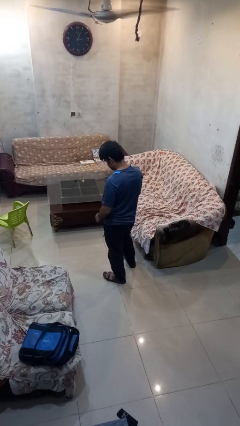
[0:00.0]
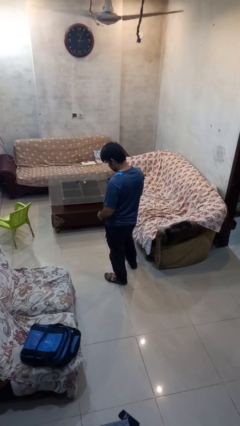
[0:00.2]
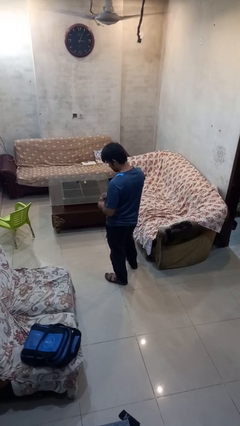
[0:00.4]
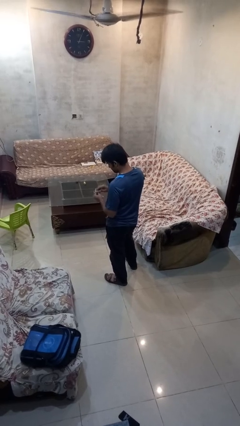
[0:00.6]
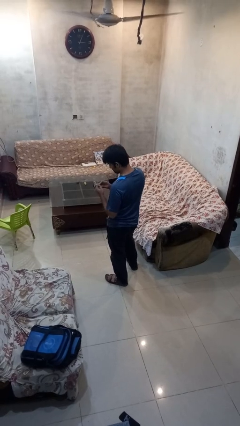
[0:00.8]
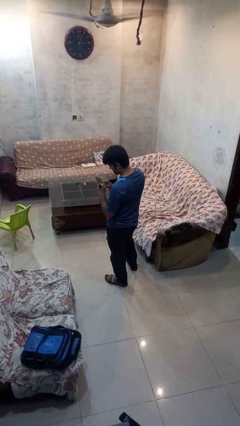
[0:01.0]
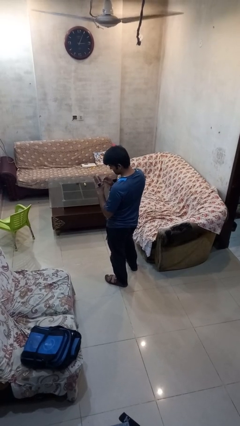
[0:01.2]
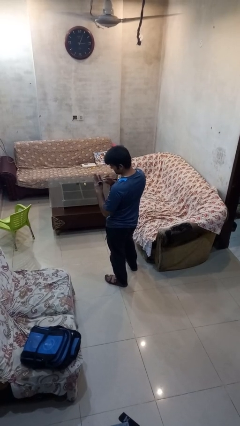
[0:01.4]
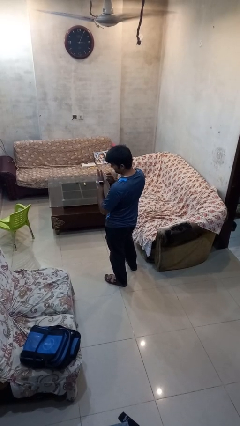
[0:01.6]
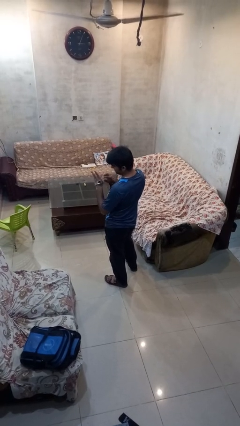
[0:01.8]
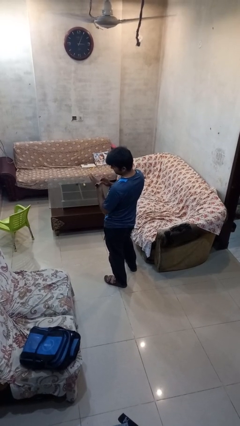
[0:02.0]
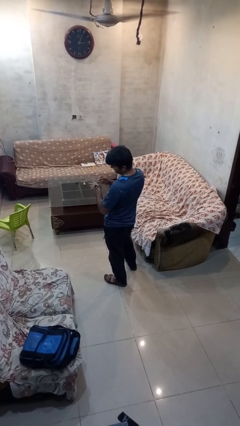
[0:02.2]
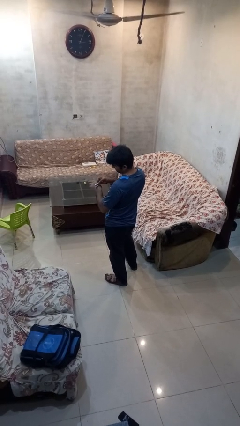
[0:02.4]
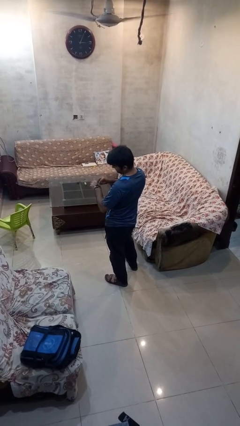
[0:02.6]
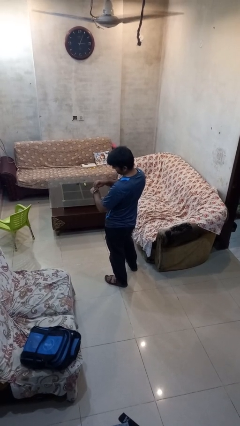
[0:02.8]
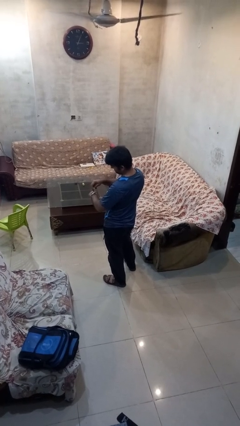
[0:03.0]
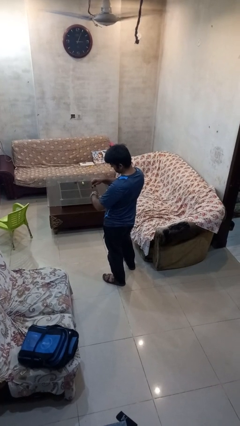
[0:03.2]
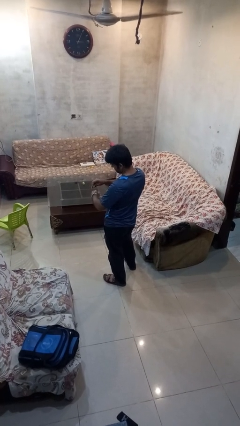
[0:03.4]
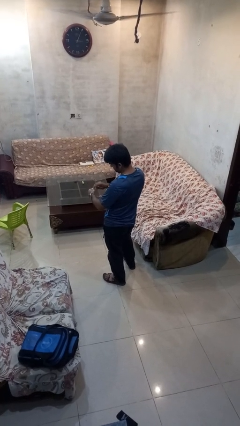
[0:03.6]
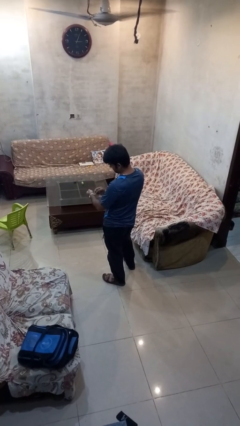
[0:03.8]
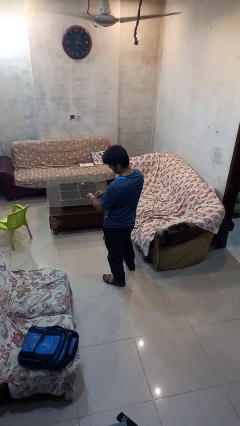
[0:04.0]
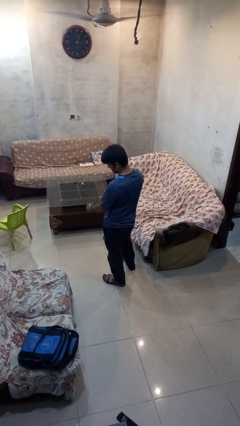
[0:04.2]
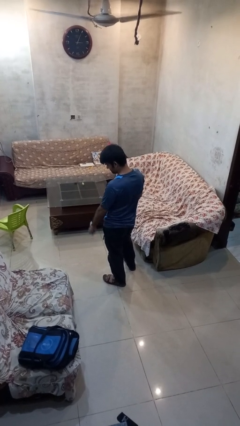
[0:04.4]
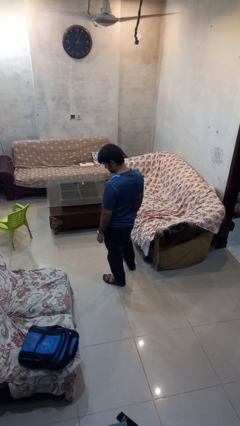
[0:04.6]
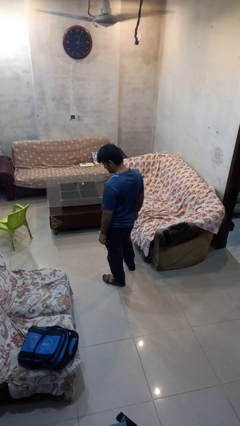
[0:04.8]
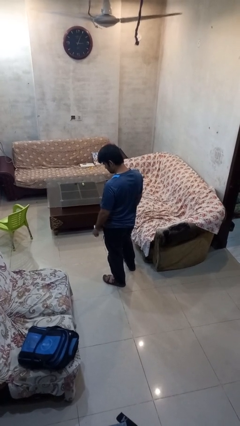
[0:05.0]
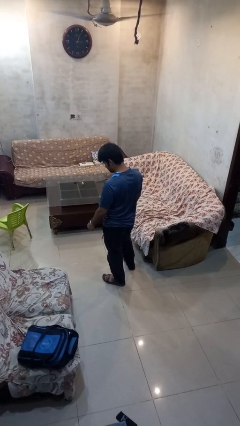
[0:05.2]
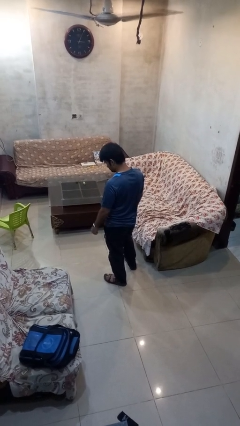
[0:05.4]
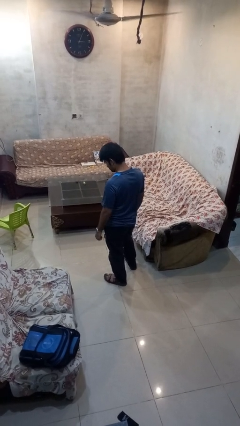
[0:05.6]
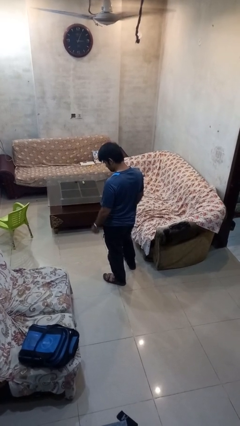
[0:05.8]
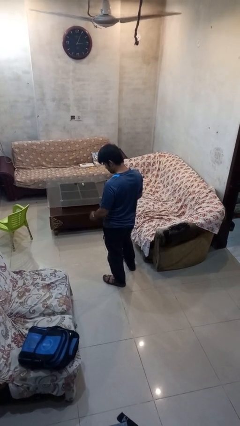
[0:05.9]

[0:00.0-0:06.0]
person puts on wristwatch

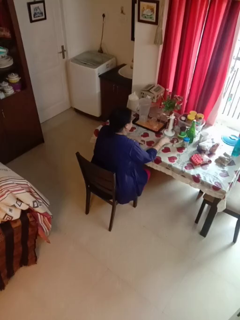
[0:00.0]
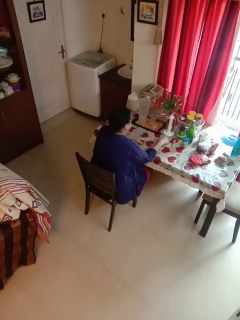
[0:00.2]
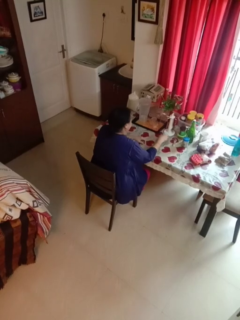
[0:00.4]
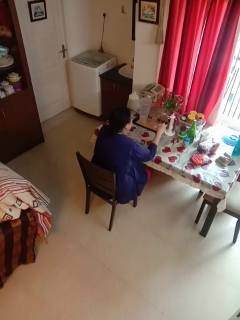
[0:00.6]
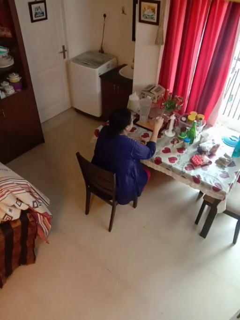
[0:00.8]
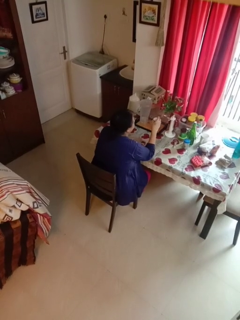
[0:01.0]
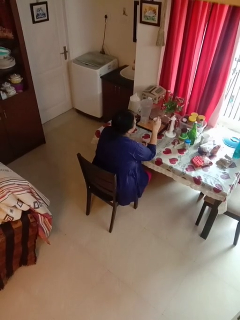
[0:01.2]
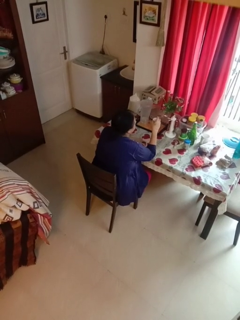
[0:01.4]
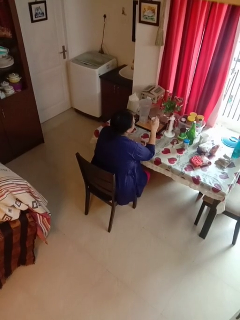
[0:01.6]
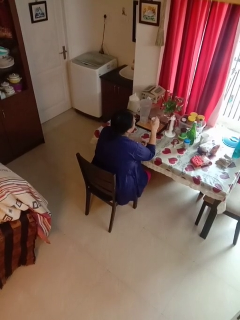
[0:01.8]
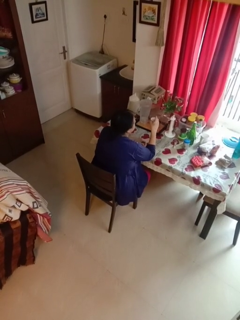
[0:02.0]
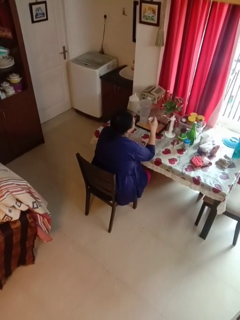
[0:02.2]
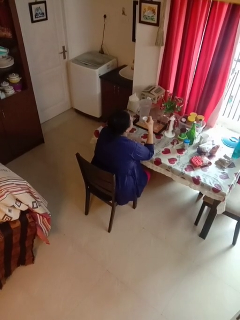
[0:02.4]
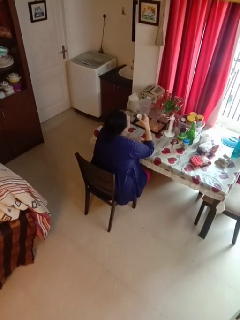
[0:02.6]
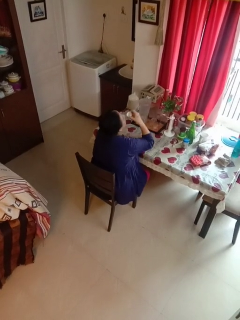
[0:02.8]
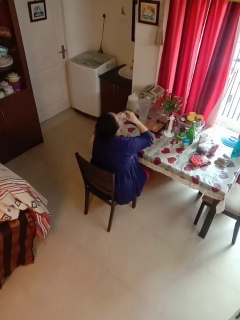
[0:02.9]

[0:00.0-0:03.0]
person picks up object from table

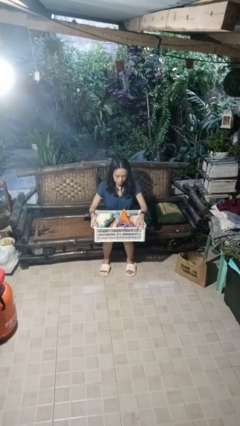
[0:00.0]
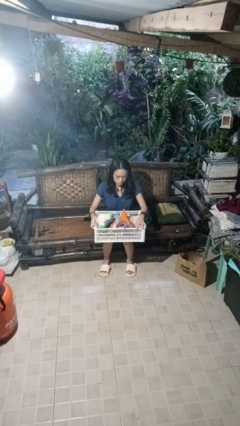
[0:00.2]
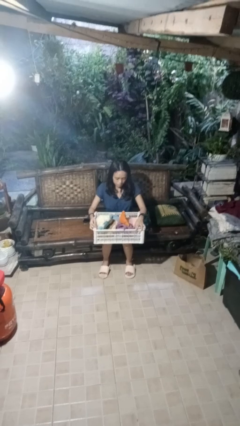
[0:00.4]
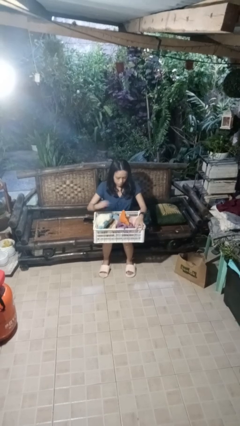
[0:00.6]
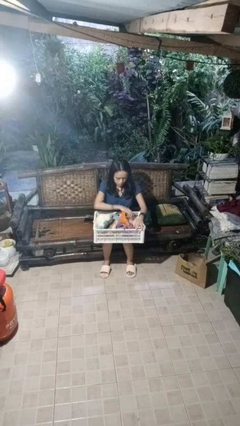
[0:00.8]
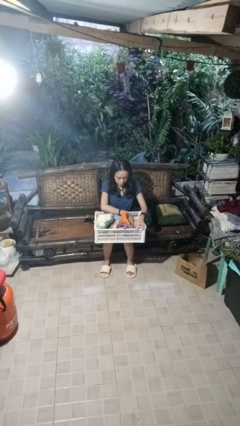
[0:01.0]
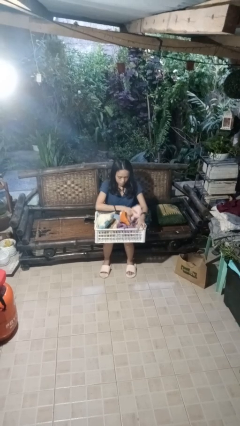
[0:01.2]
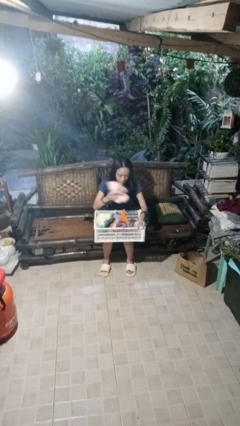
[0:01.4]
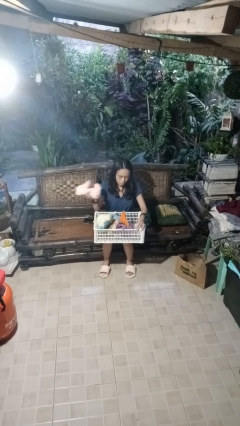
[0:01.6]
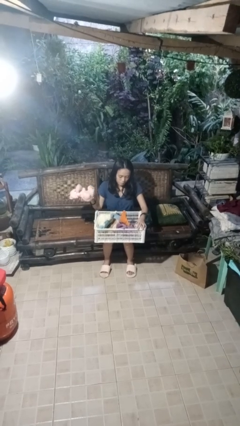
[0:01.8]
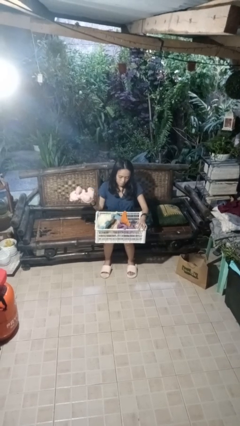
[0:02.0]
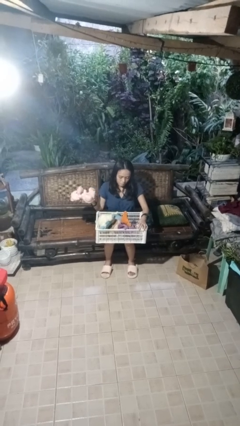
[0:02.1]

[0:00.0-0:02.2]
person takes object from basket

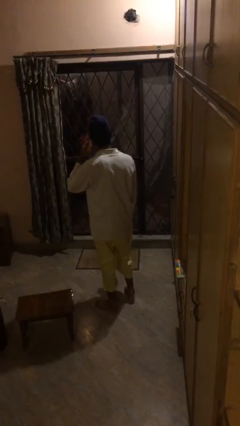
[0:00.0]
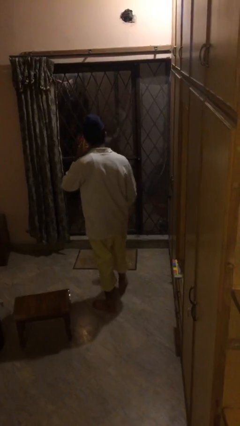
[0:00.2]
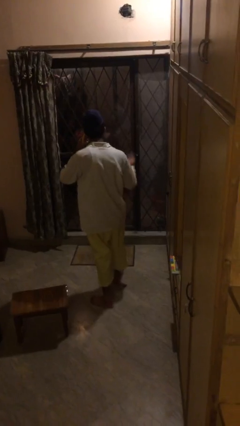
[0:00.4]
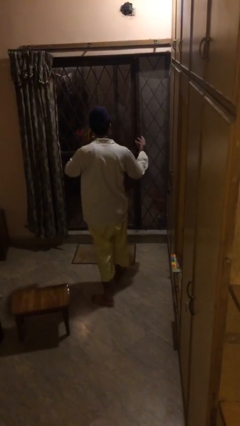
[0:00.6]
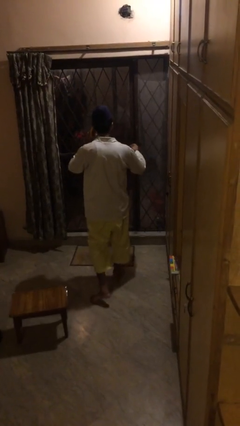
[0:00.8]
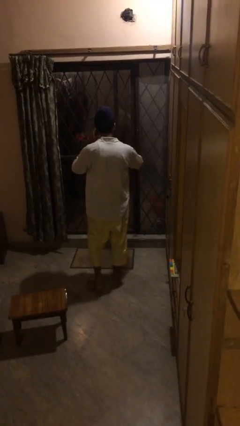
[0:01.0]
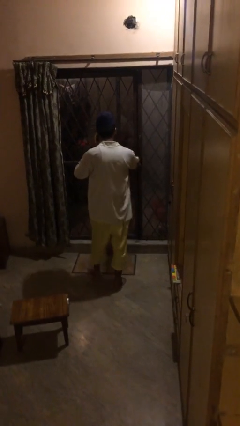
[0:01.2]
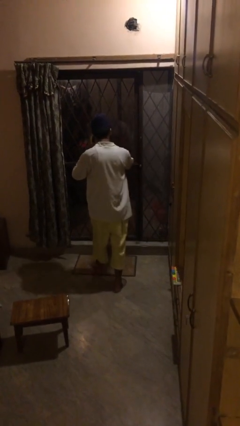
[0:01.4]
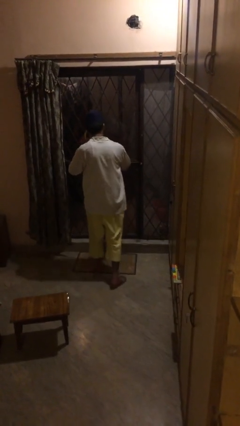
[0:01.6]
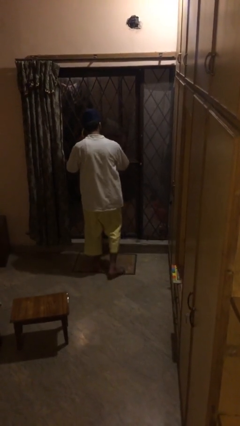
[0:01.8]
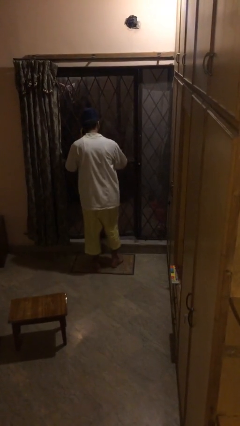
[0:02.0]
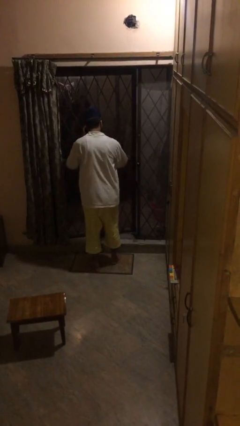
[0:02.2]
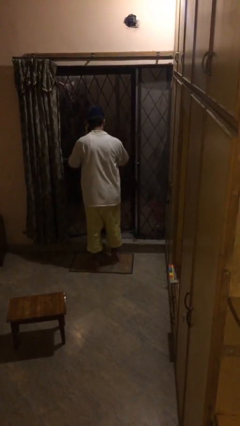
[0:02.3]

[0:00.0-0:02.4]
person opens facility door

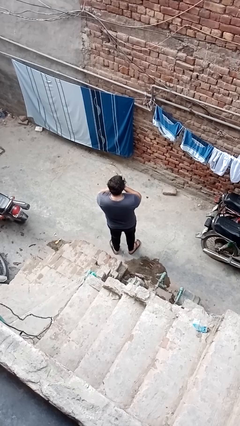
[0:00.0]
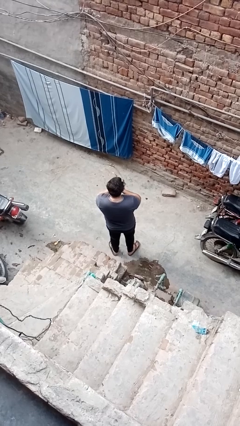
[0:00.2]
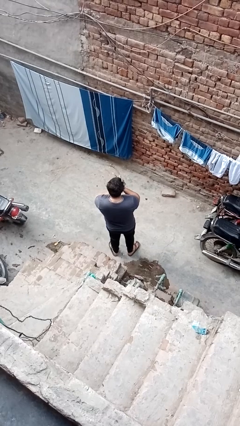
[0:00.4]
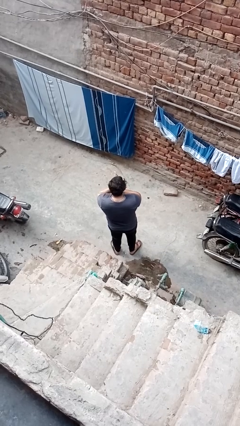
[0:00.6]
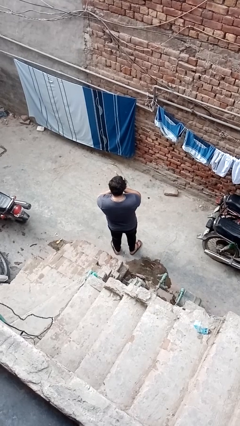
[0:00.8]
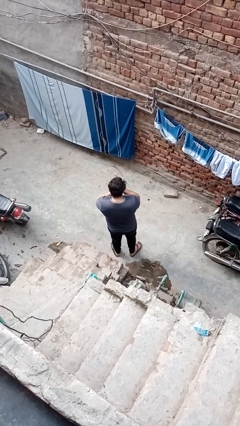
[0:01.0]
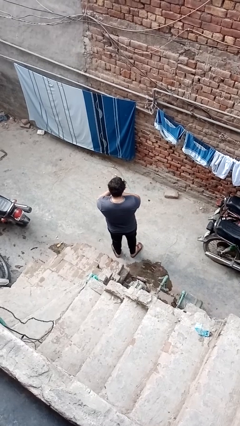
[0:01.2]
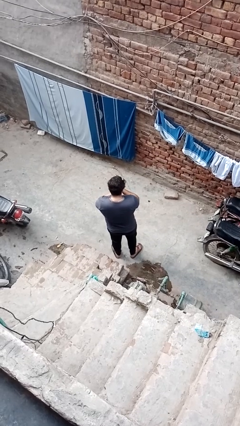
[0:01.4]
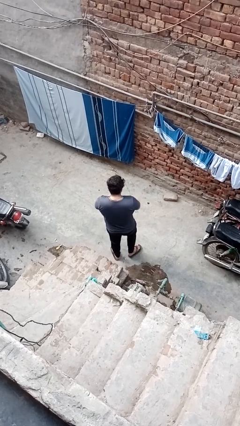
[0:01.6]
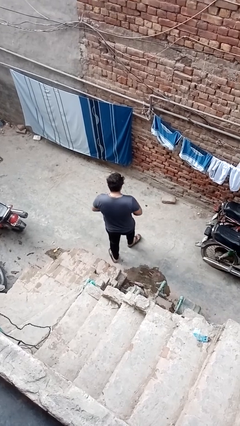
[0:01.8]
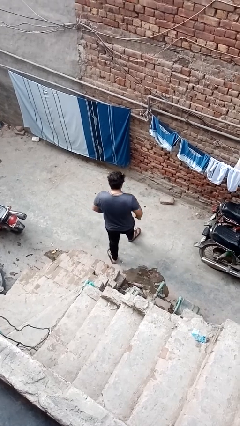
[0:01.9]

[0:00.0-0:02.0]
person blows into hands

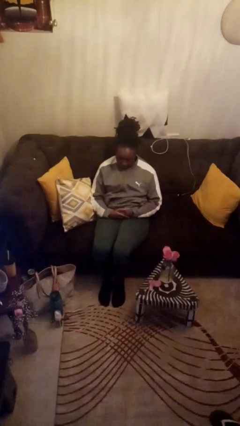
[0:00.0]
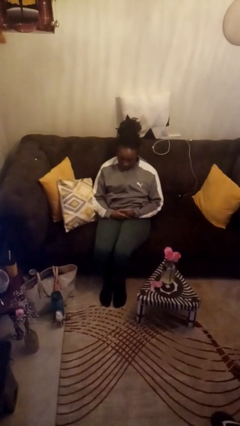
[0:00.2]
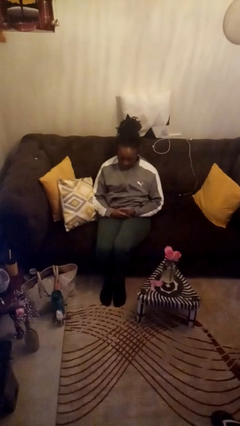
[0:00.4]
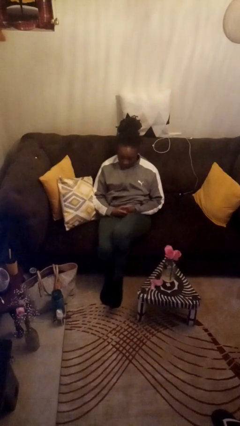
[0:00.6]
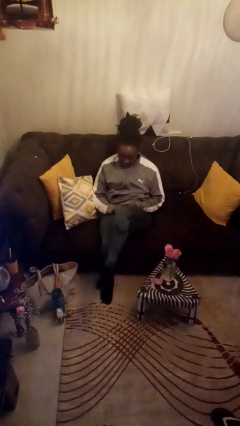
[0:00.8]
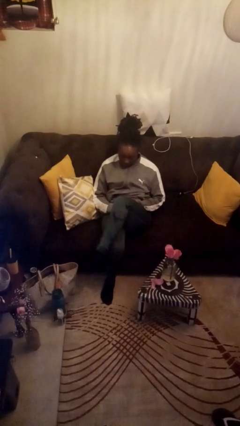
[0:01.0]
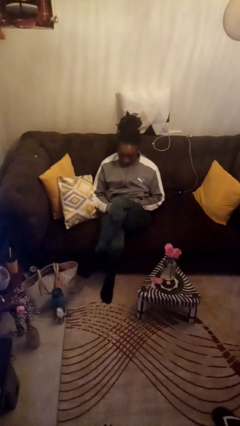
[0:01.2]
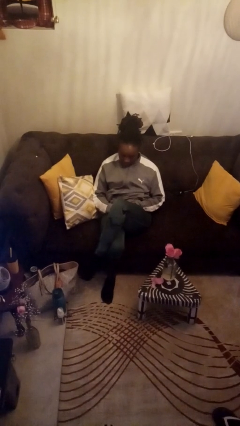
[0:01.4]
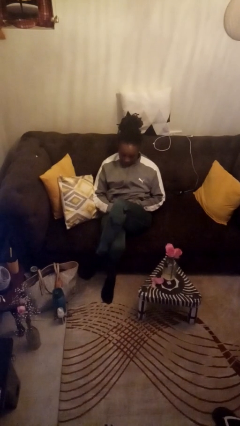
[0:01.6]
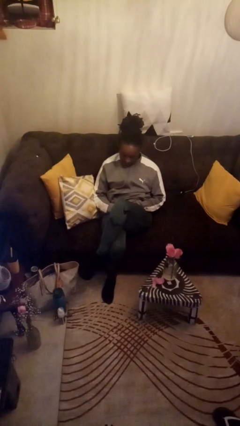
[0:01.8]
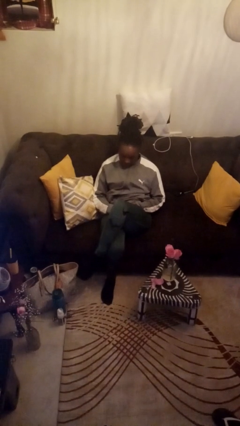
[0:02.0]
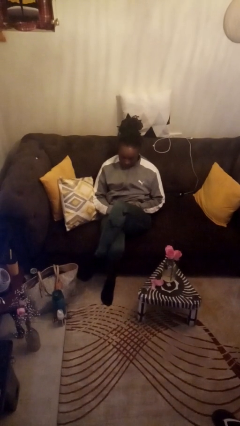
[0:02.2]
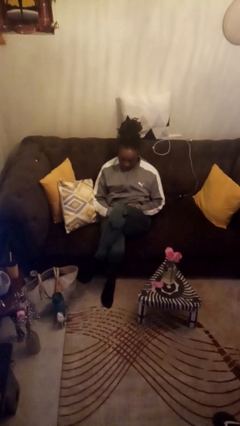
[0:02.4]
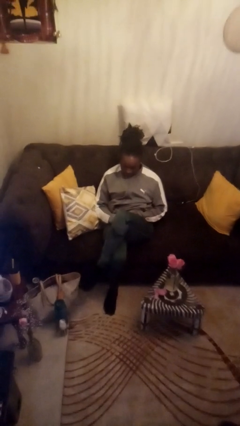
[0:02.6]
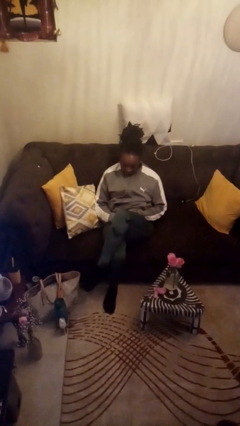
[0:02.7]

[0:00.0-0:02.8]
person crosses legs
